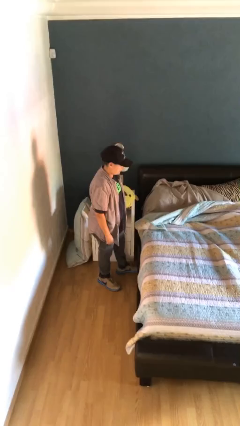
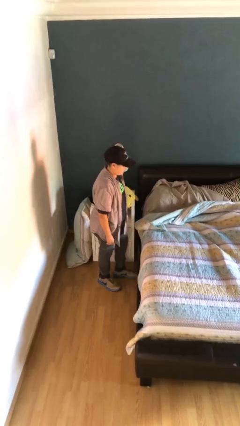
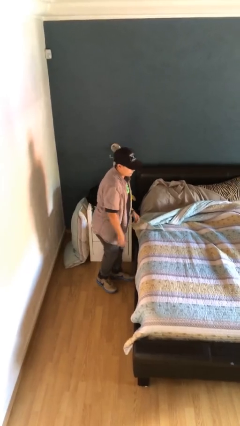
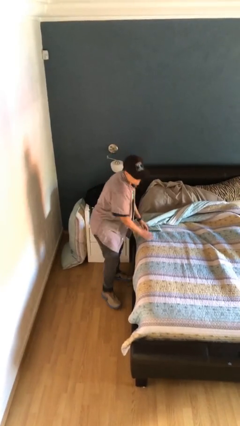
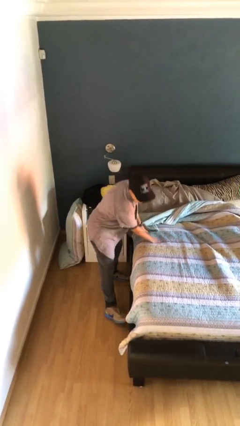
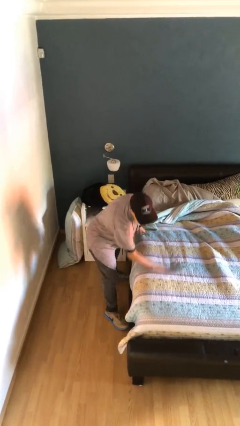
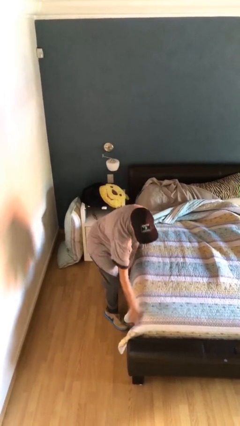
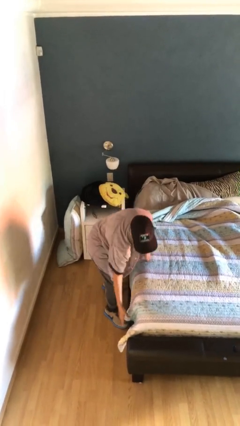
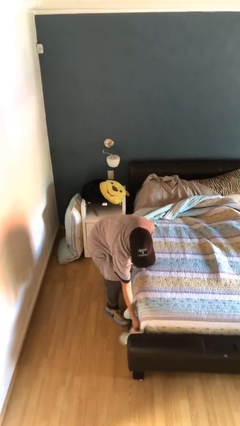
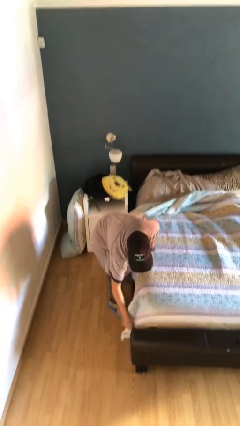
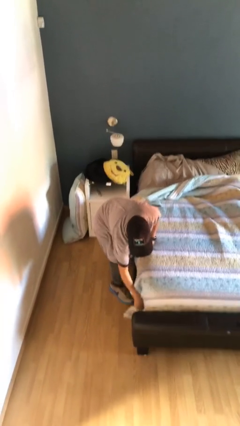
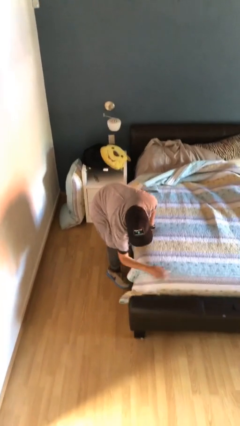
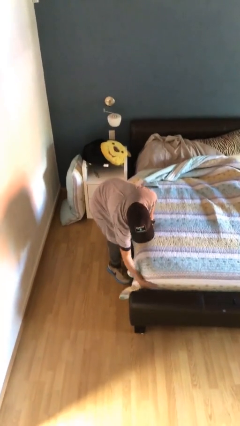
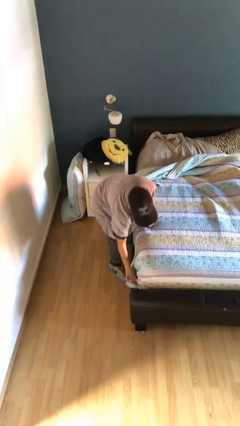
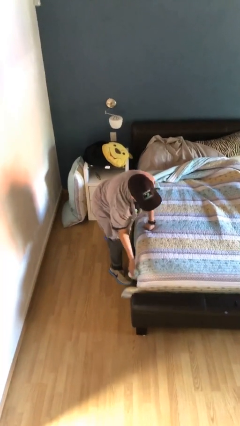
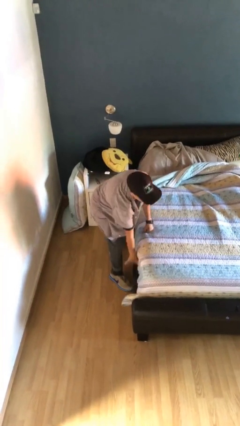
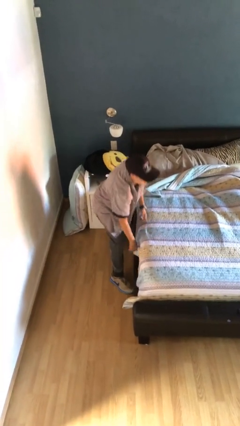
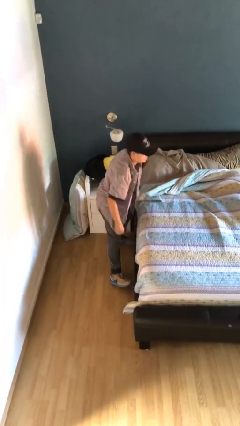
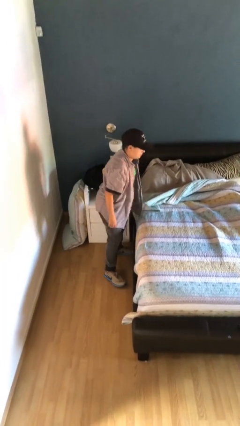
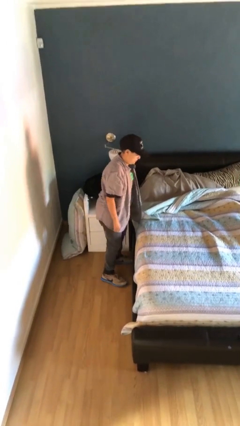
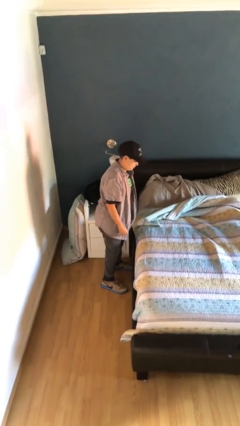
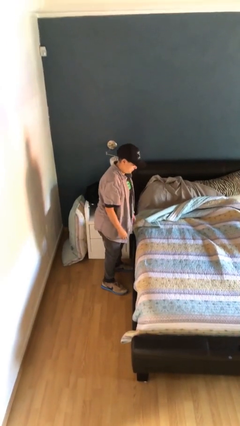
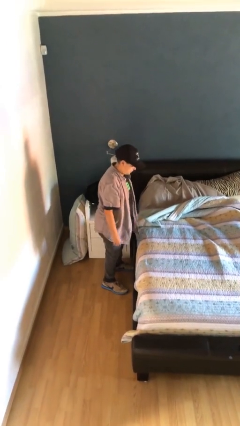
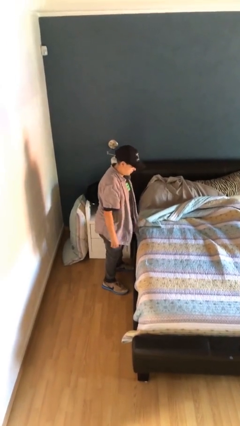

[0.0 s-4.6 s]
person makes bed

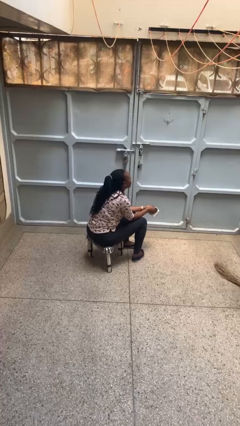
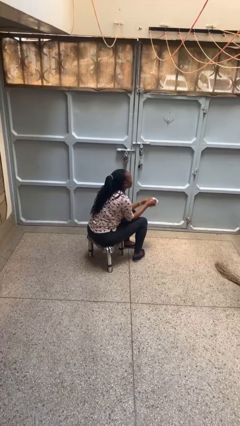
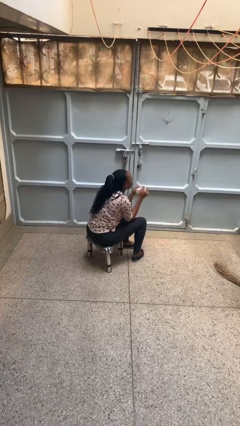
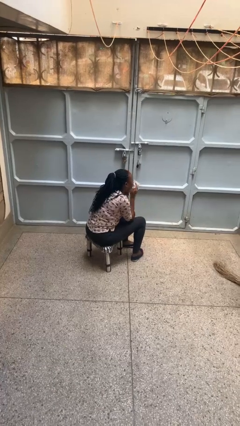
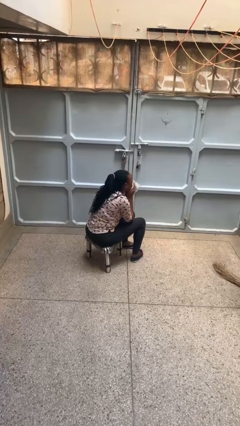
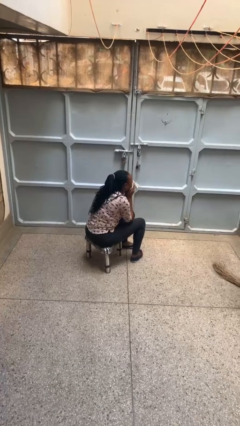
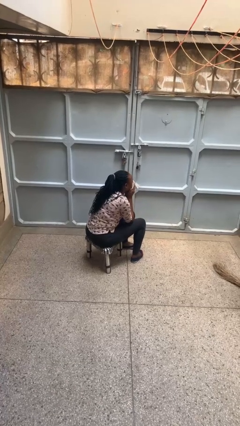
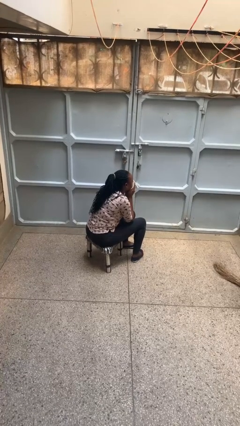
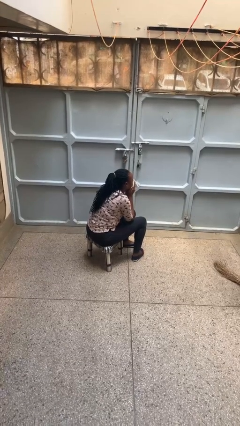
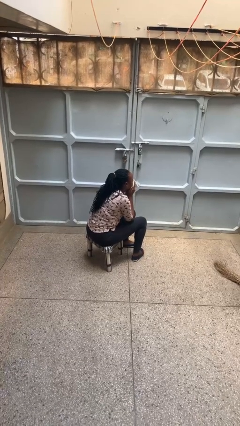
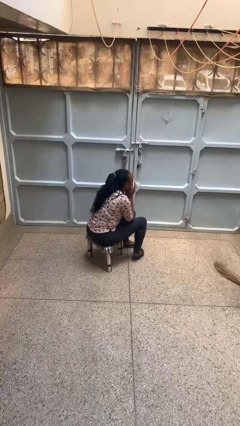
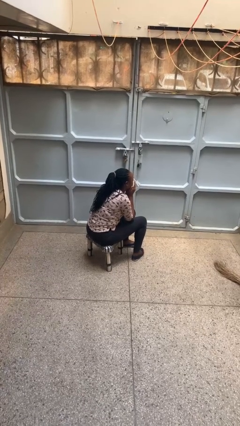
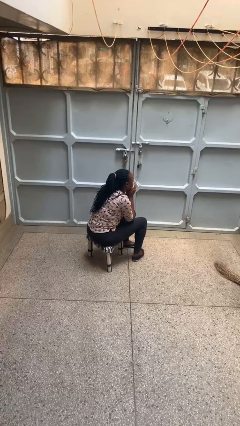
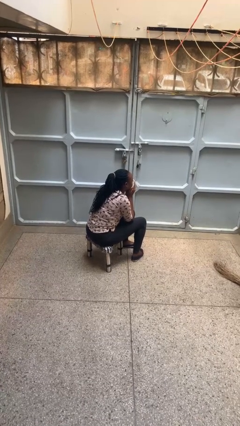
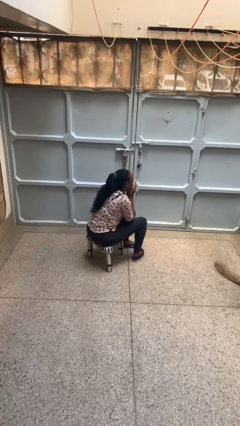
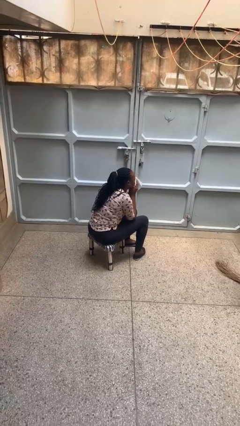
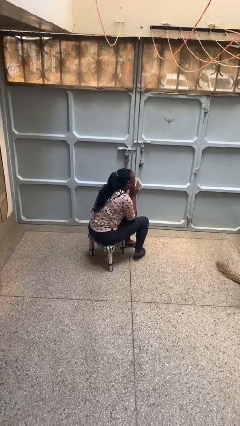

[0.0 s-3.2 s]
person blows nose

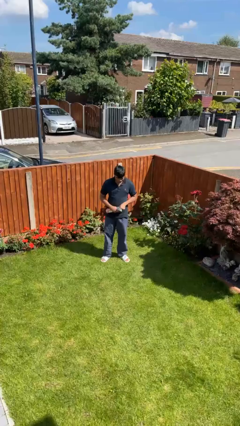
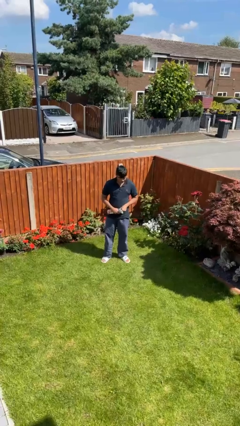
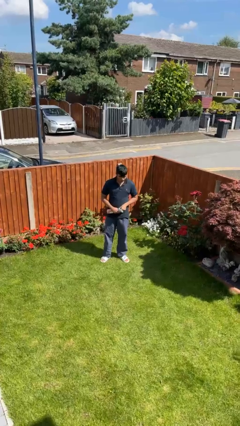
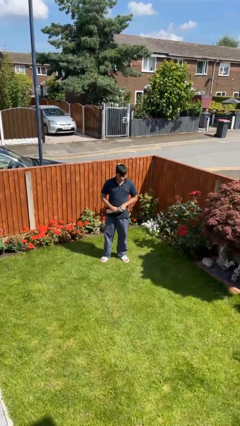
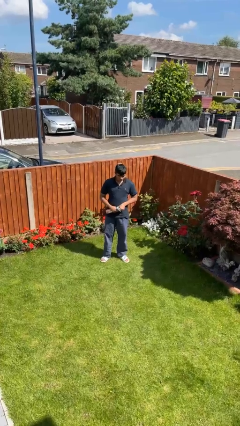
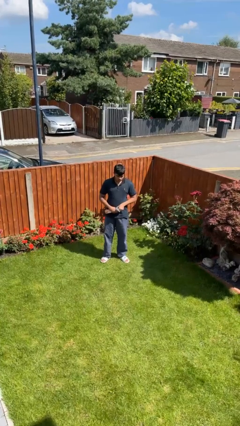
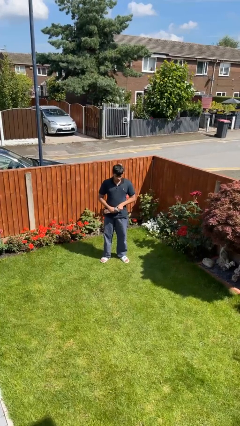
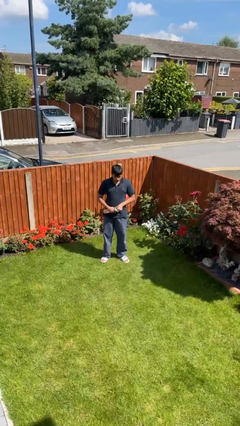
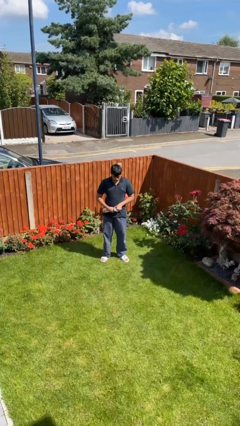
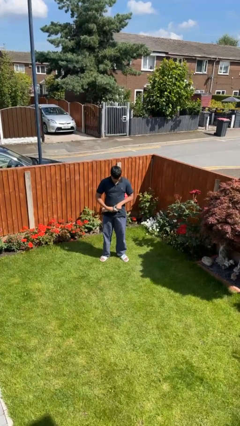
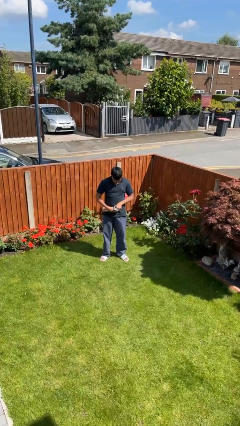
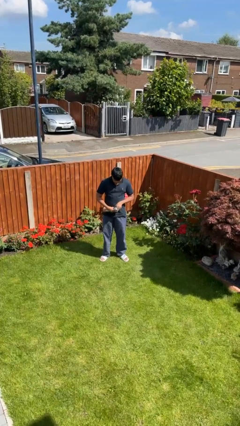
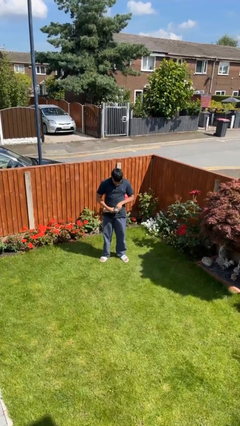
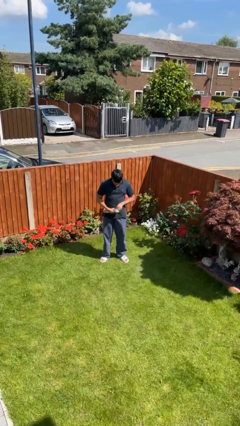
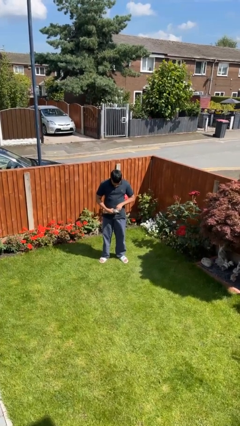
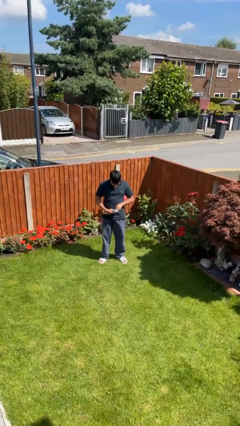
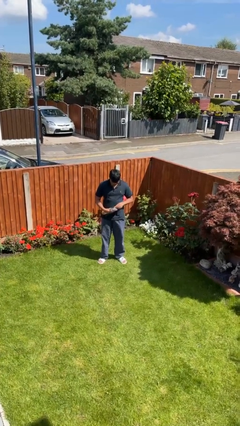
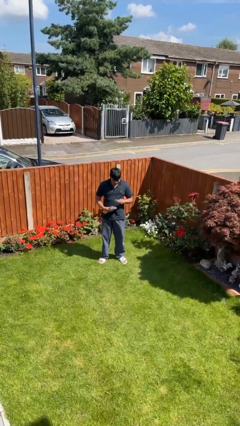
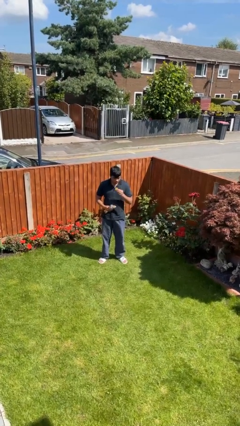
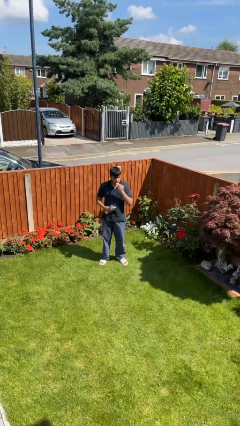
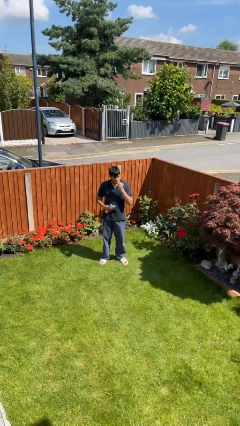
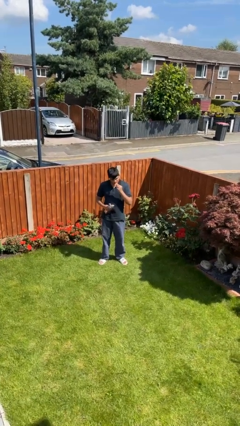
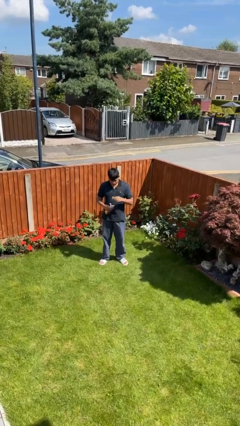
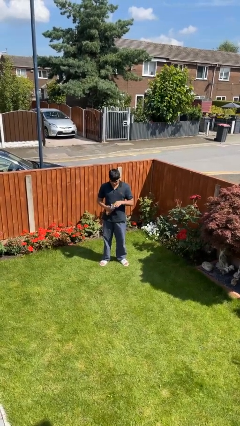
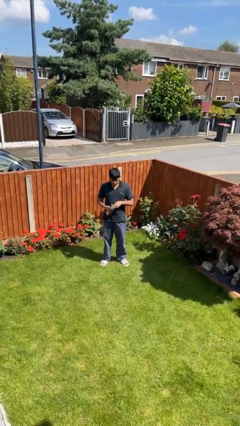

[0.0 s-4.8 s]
person eats snack from bag

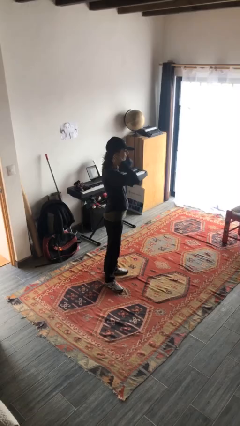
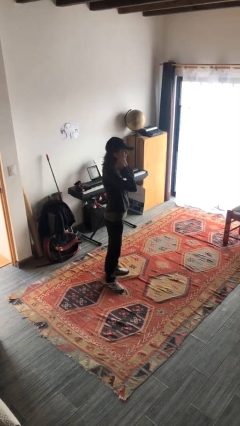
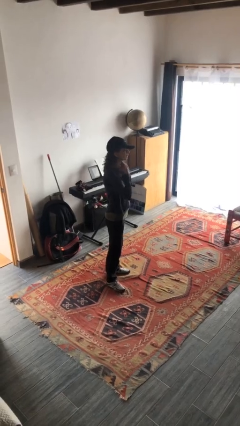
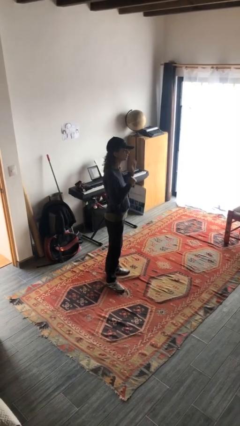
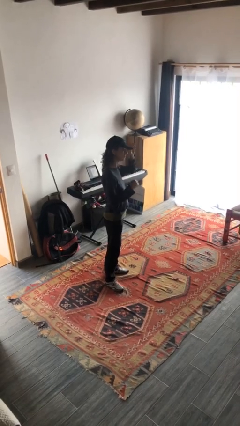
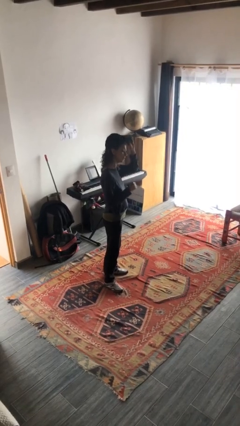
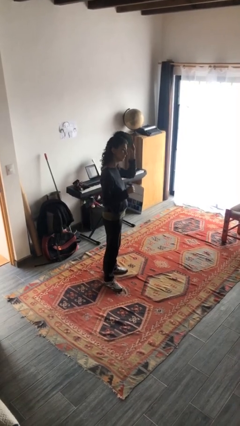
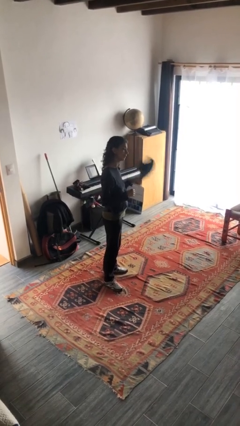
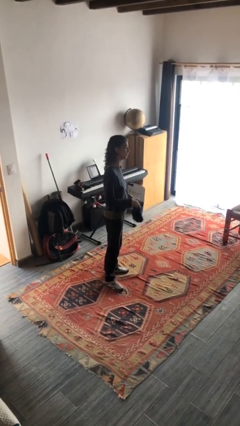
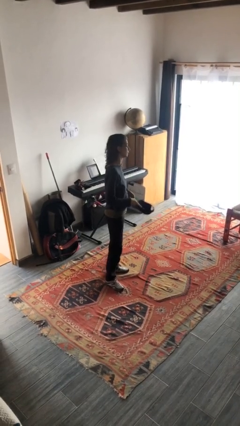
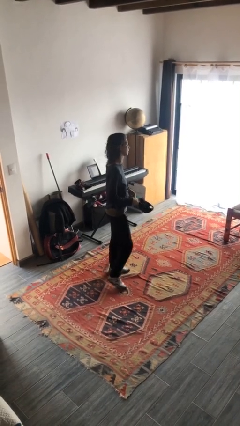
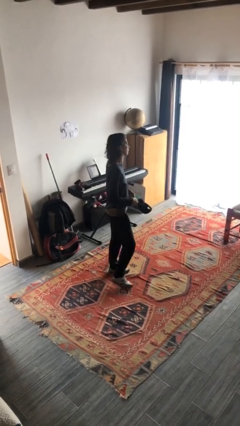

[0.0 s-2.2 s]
person takes off hat

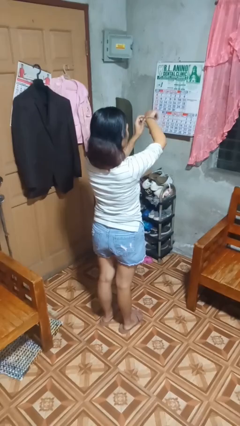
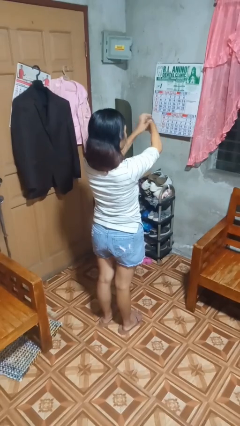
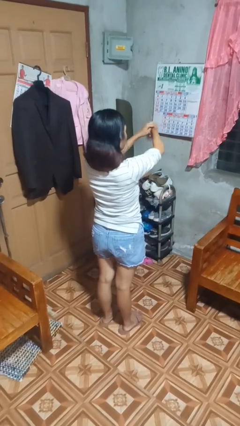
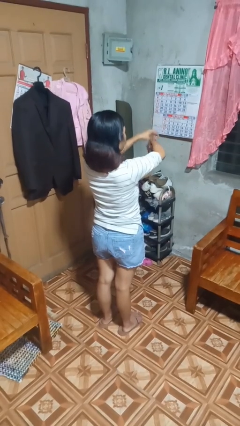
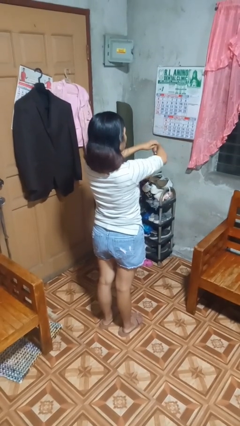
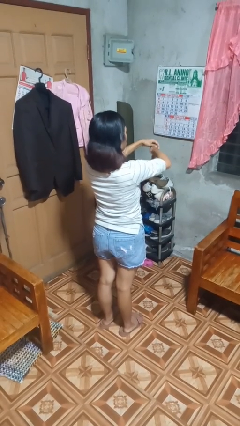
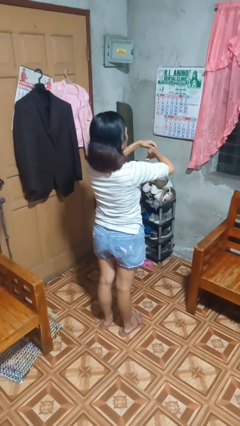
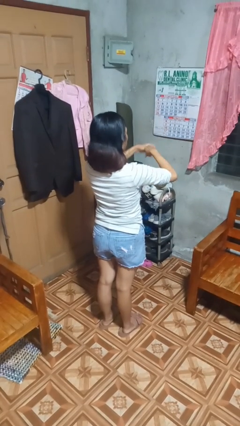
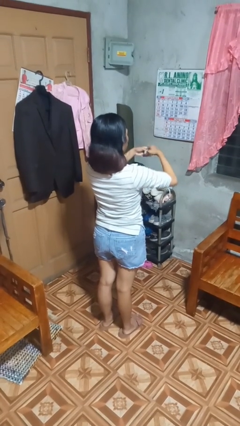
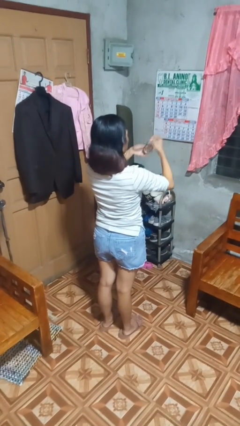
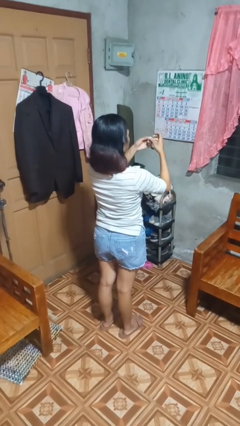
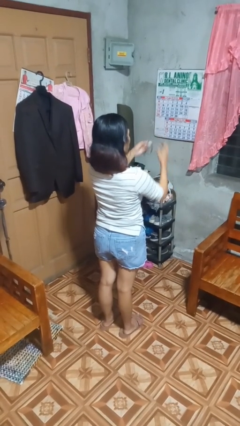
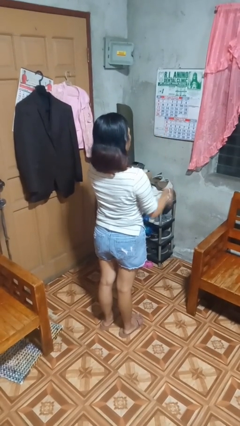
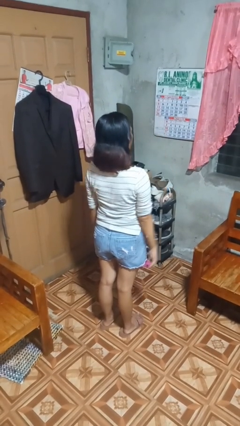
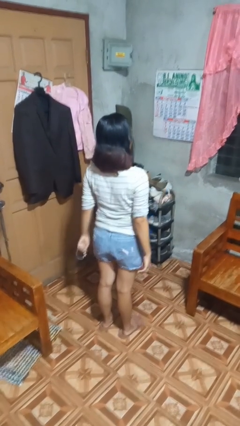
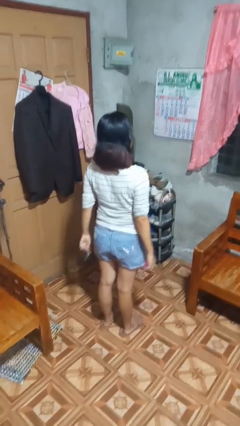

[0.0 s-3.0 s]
person takes off wristwatch
